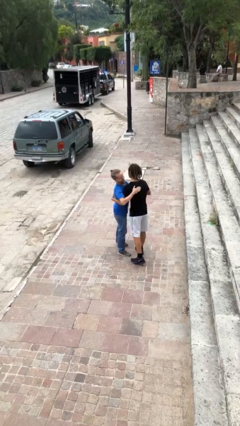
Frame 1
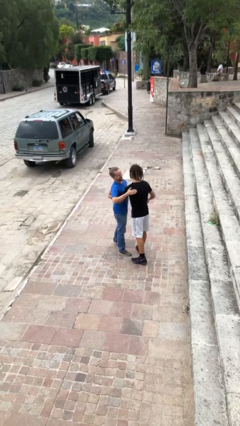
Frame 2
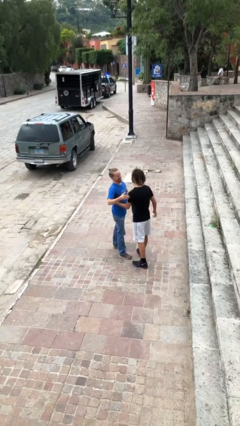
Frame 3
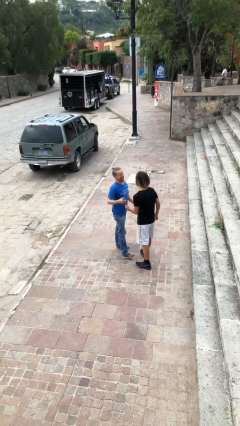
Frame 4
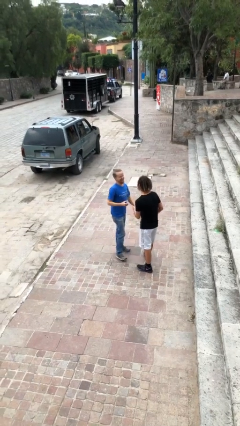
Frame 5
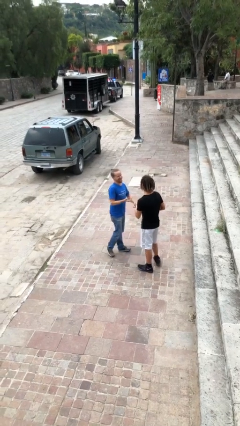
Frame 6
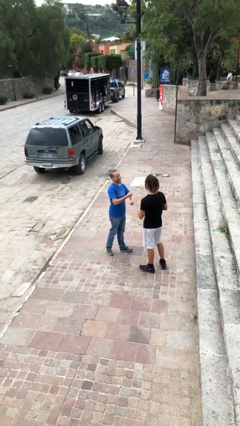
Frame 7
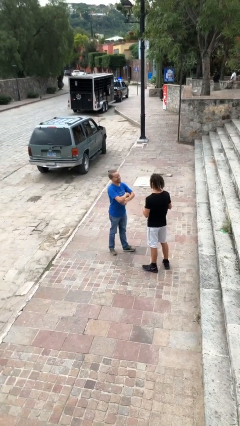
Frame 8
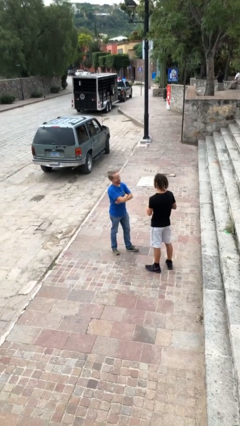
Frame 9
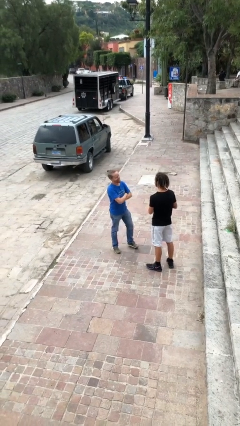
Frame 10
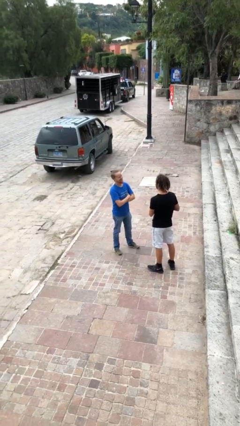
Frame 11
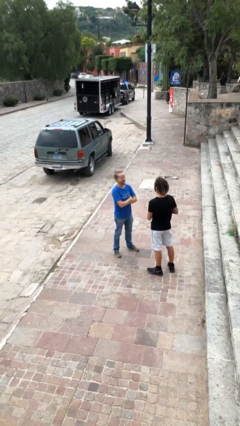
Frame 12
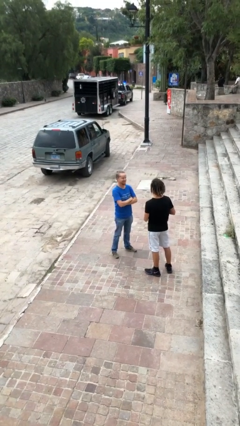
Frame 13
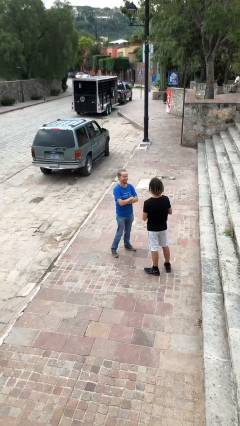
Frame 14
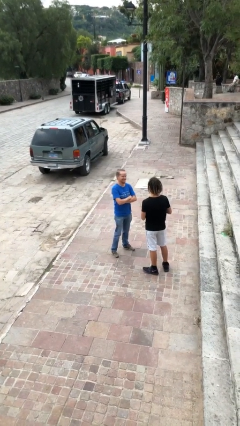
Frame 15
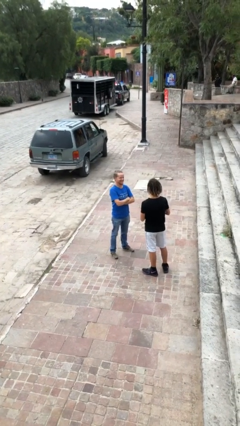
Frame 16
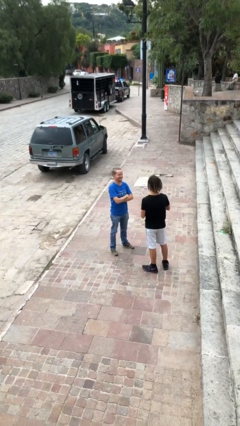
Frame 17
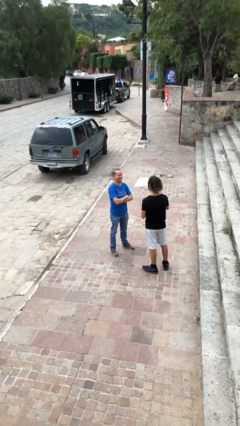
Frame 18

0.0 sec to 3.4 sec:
person talks to person

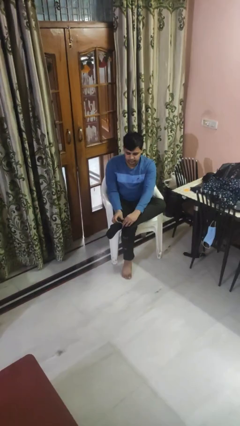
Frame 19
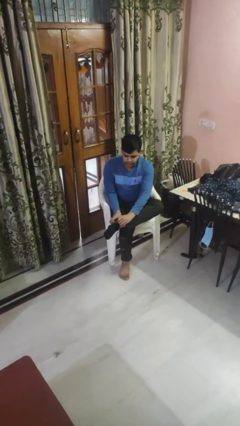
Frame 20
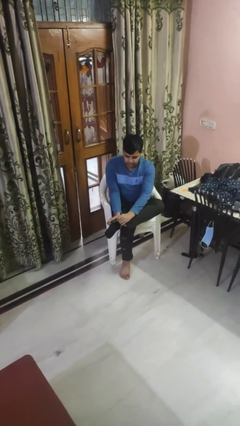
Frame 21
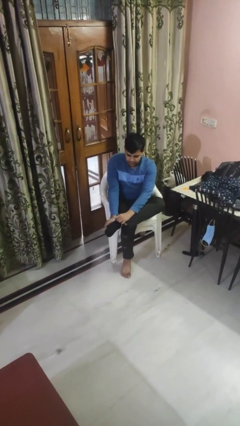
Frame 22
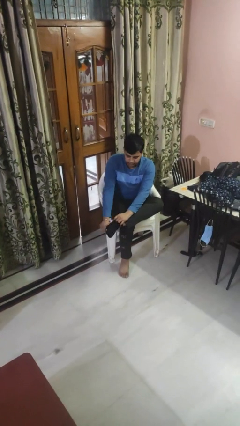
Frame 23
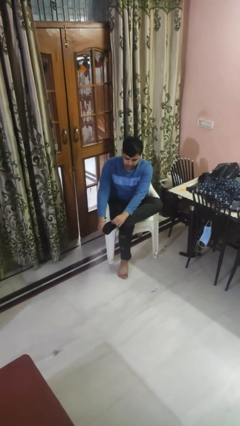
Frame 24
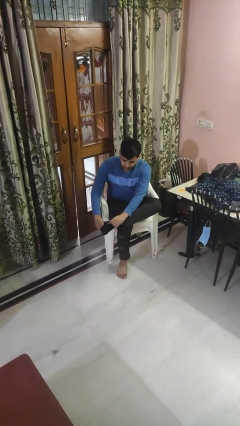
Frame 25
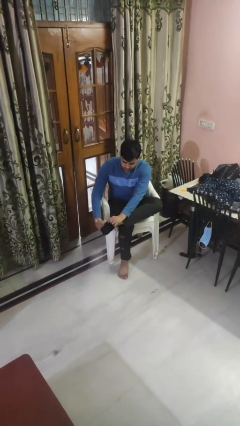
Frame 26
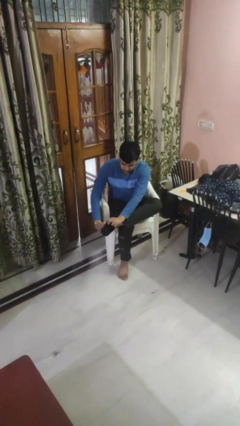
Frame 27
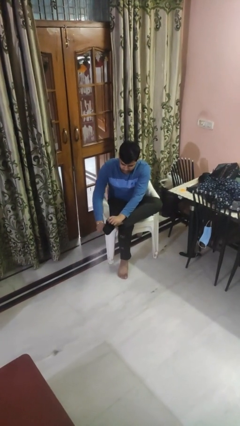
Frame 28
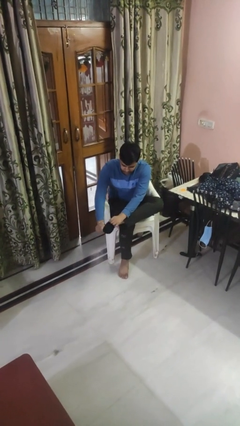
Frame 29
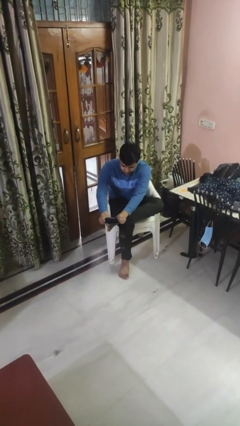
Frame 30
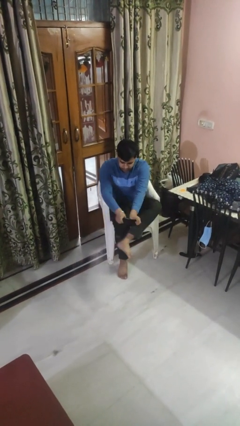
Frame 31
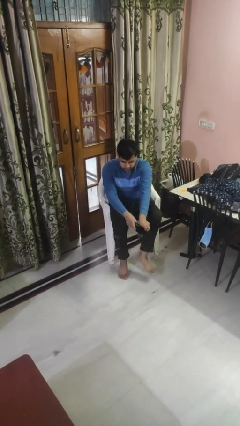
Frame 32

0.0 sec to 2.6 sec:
person takes off socks

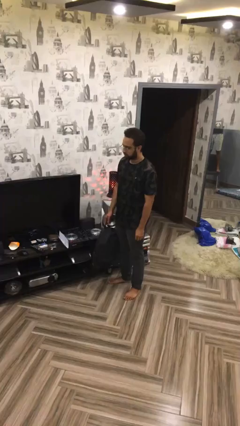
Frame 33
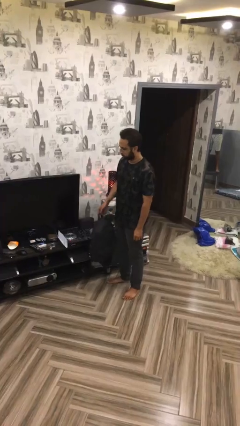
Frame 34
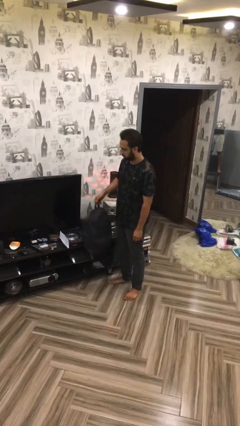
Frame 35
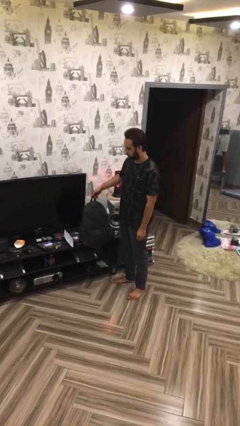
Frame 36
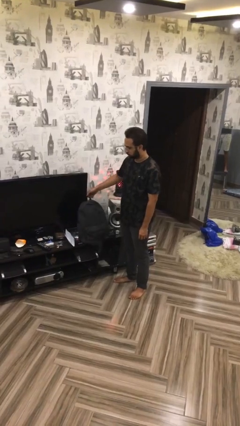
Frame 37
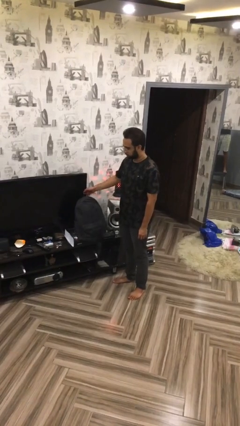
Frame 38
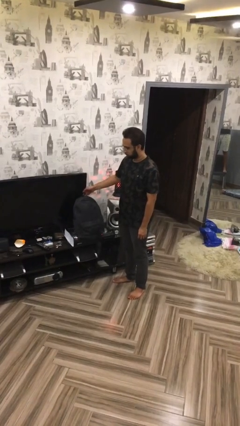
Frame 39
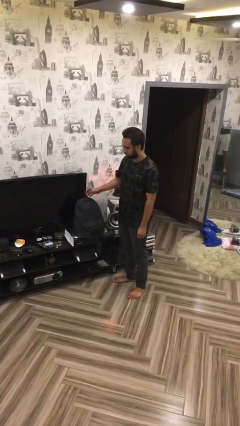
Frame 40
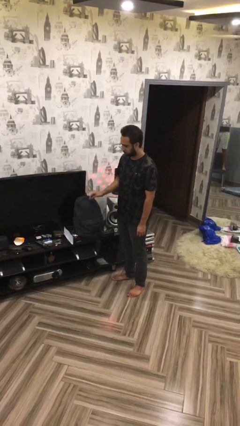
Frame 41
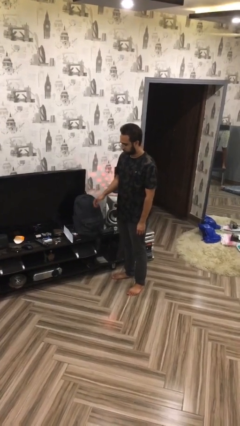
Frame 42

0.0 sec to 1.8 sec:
person puts down object on table

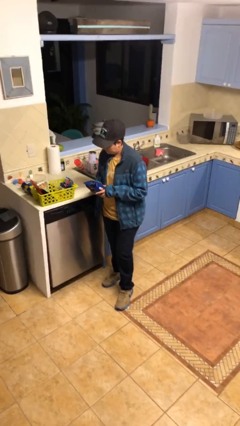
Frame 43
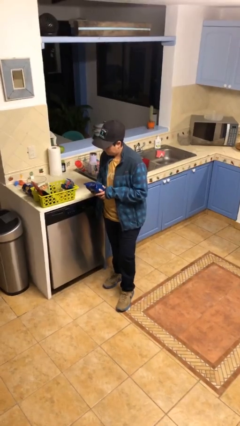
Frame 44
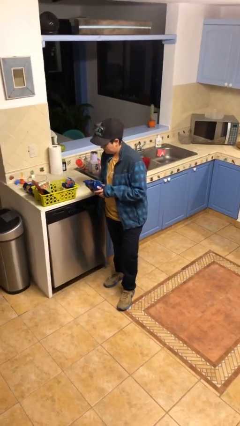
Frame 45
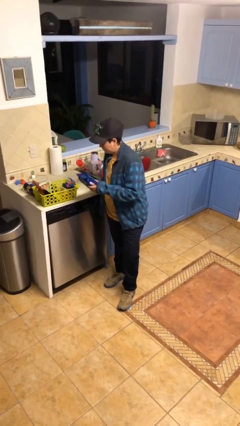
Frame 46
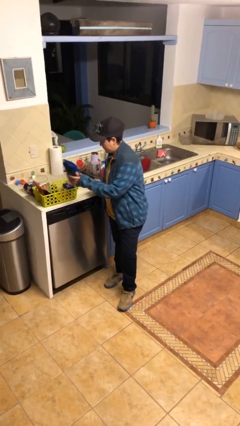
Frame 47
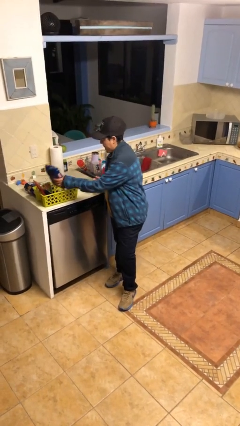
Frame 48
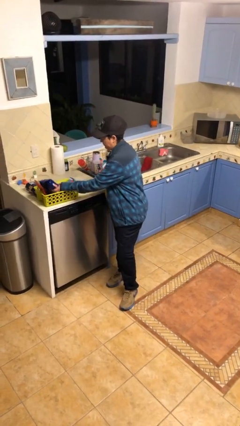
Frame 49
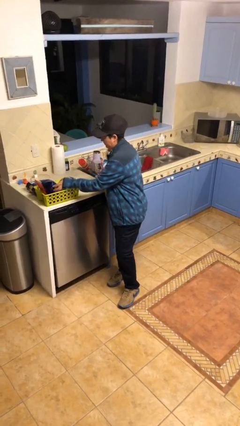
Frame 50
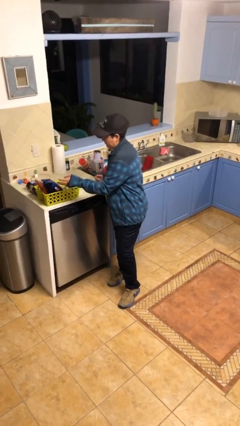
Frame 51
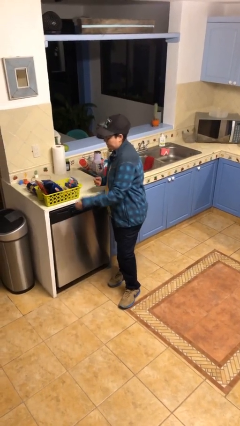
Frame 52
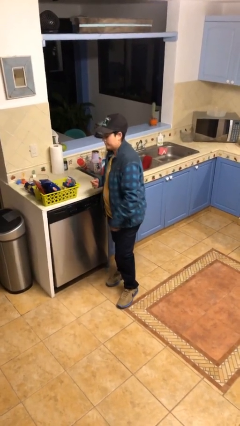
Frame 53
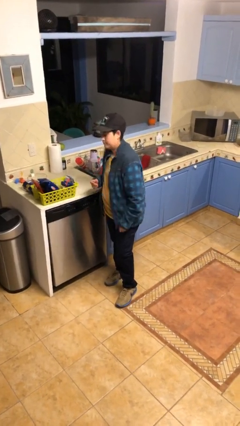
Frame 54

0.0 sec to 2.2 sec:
person puts object into basket

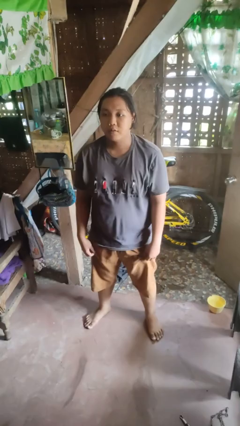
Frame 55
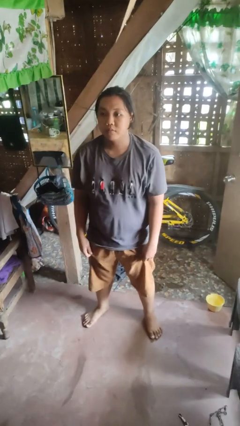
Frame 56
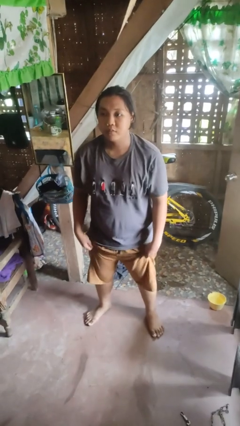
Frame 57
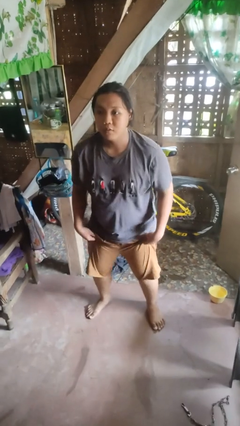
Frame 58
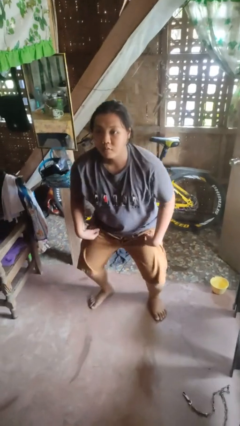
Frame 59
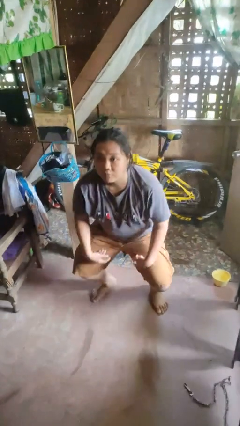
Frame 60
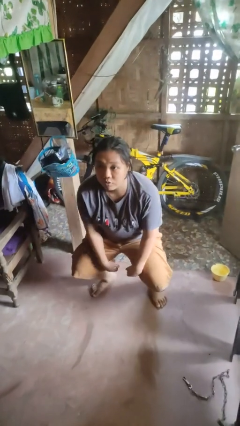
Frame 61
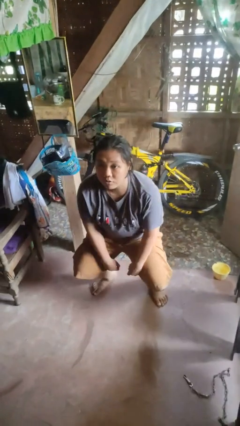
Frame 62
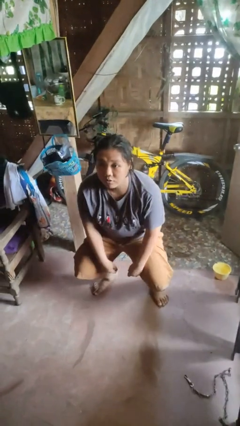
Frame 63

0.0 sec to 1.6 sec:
person squats

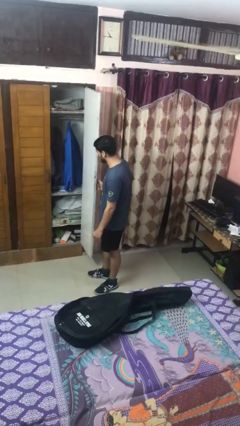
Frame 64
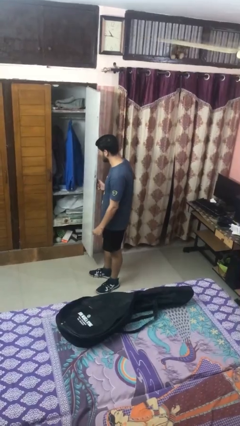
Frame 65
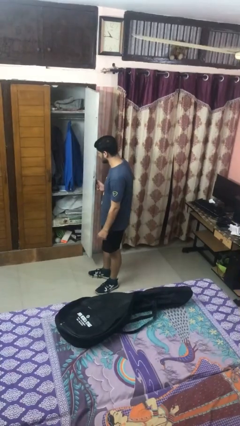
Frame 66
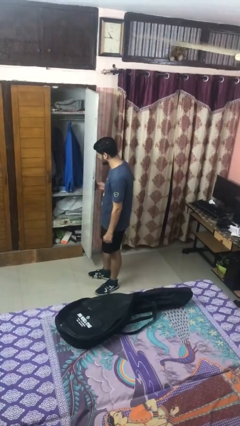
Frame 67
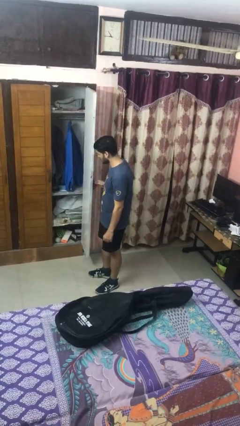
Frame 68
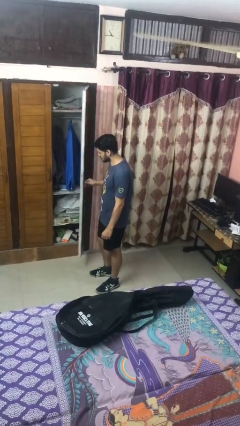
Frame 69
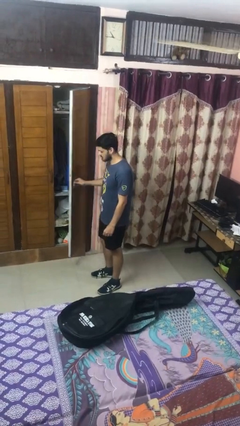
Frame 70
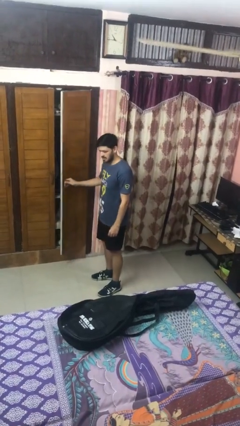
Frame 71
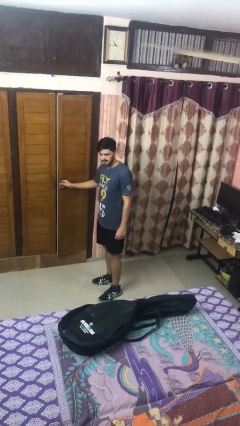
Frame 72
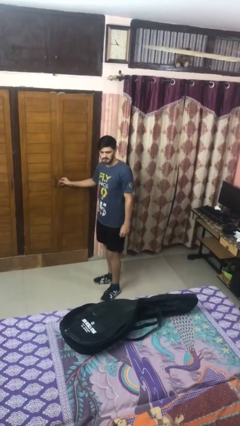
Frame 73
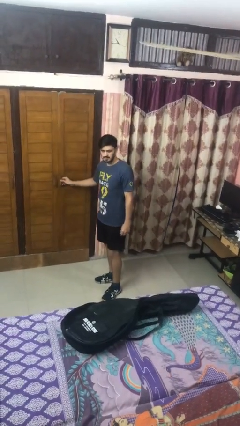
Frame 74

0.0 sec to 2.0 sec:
person closes closet door

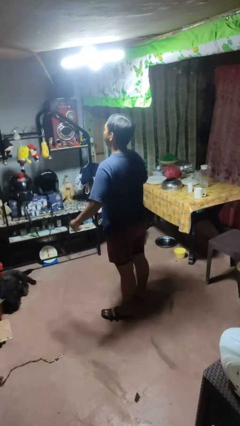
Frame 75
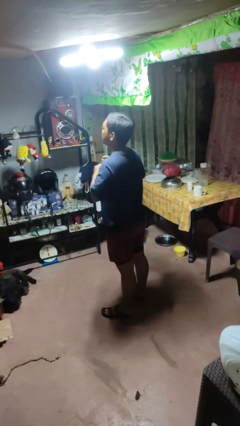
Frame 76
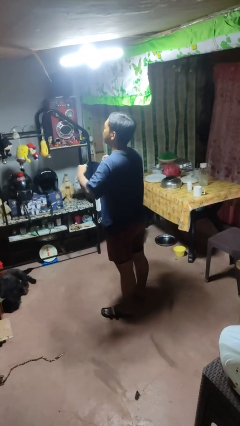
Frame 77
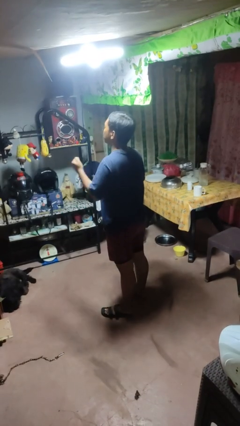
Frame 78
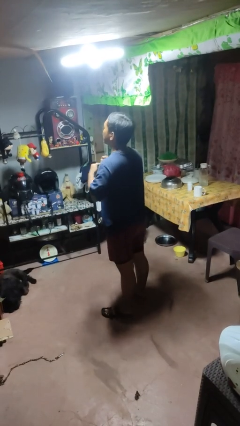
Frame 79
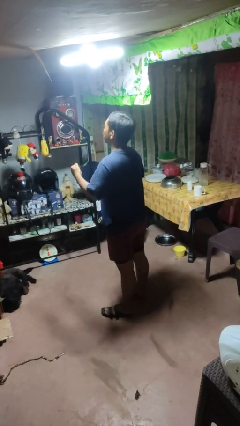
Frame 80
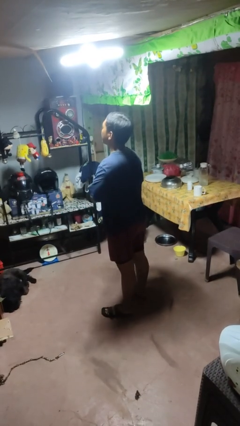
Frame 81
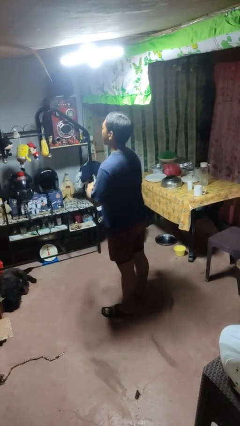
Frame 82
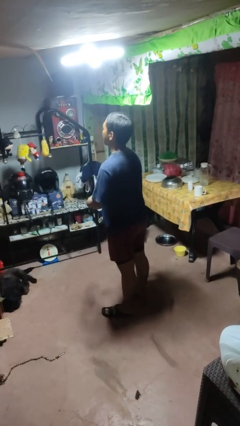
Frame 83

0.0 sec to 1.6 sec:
person drums on chest

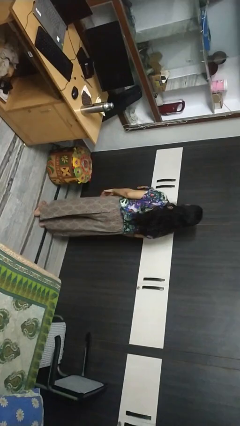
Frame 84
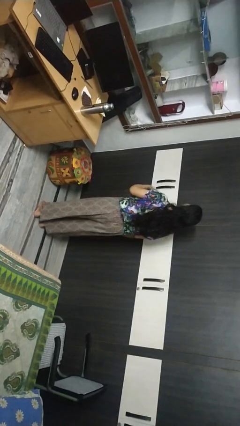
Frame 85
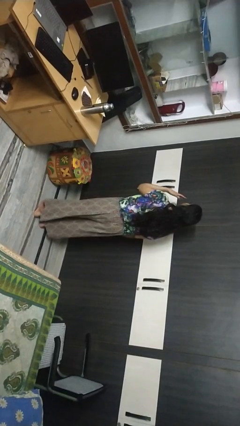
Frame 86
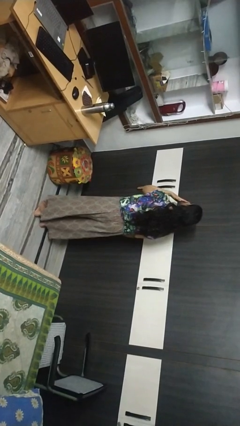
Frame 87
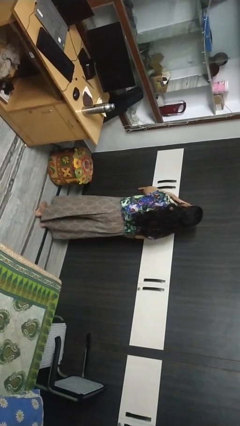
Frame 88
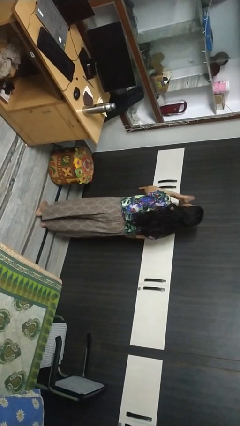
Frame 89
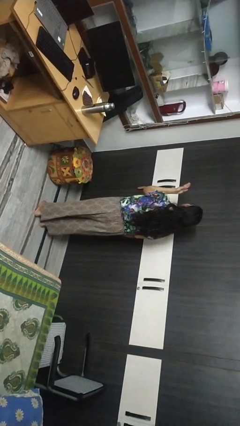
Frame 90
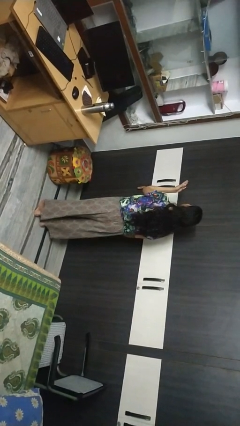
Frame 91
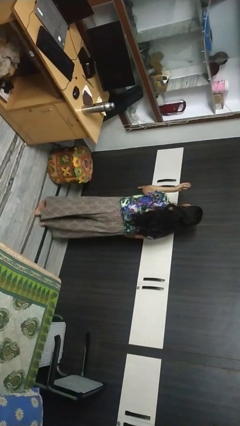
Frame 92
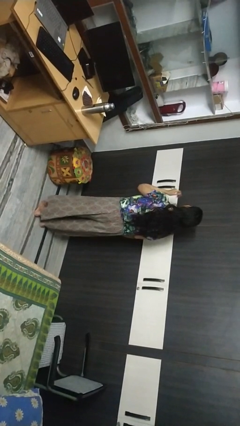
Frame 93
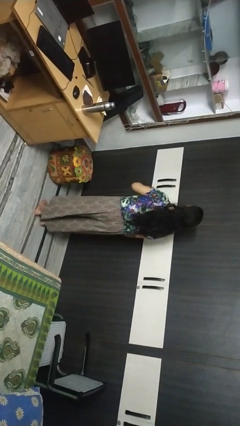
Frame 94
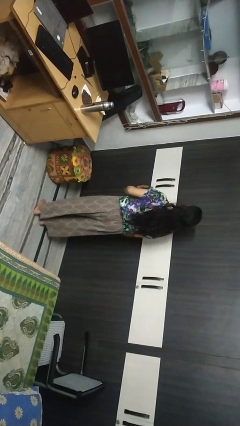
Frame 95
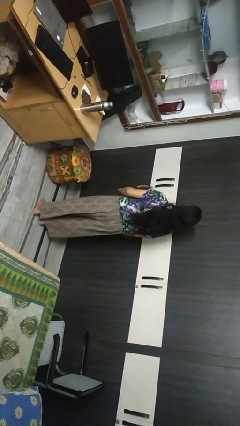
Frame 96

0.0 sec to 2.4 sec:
person gestures blow kiss
